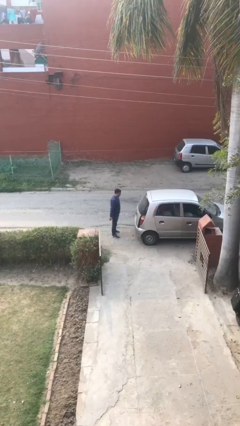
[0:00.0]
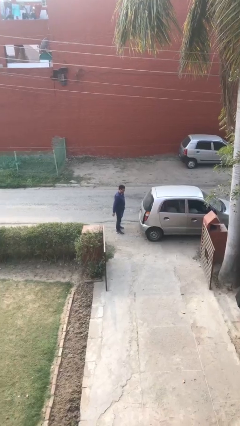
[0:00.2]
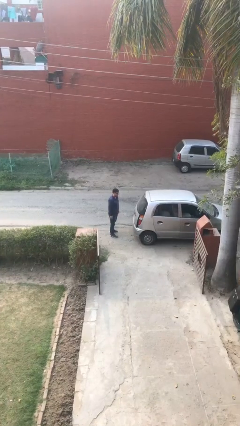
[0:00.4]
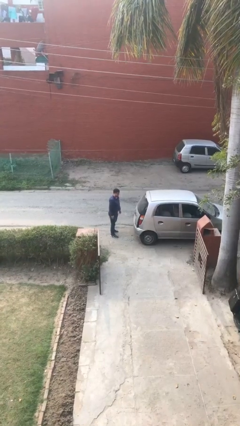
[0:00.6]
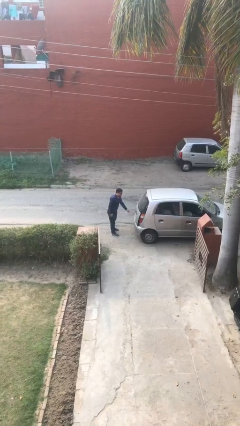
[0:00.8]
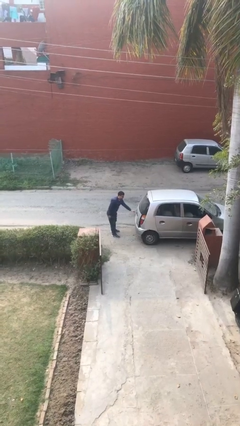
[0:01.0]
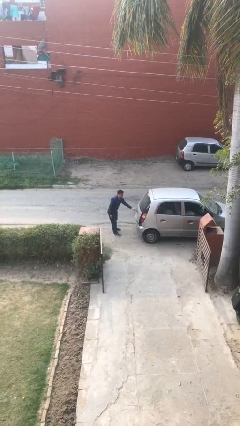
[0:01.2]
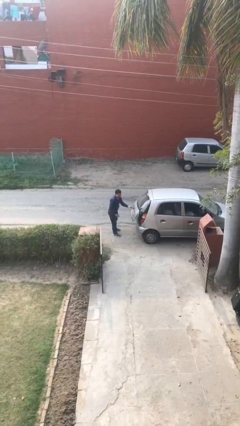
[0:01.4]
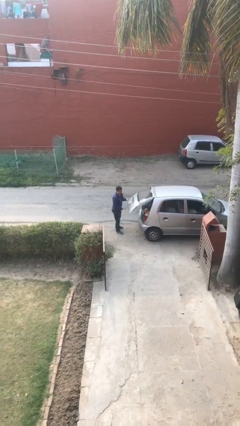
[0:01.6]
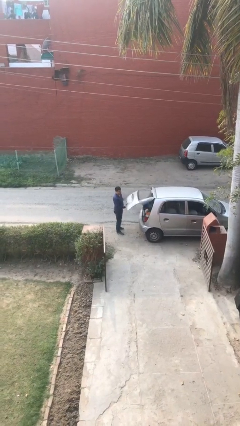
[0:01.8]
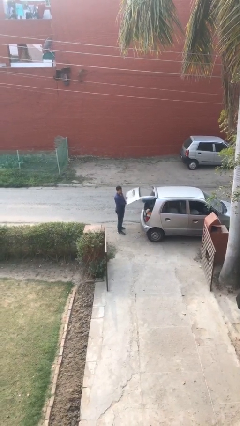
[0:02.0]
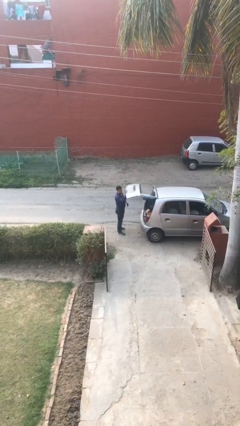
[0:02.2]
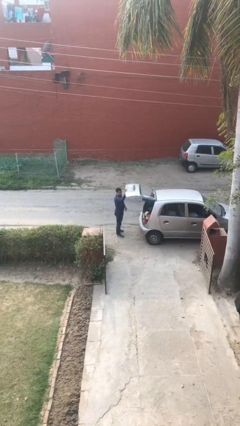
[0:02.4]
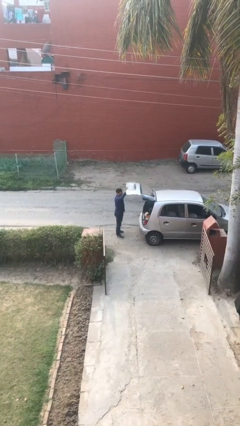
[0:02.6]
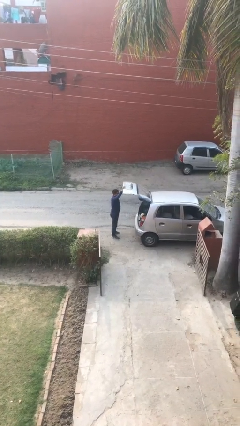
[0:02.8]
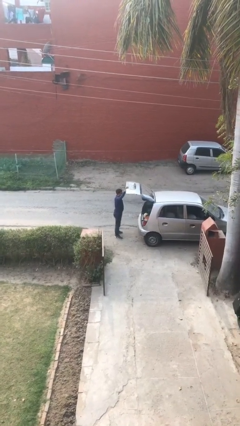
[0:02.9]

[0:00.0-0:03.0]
person opens car trunk

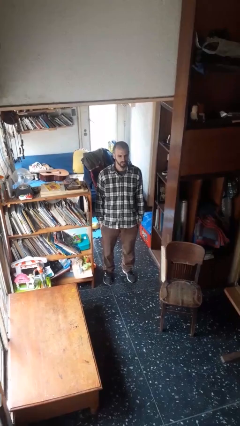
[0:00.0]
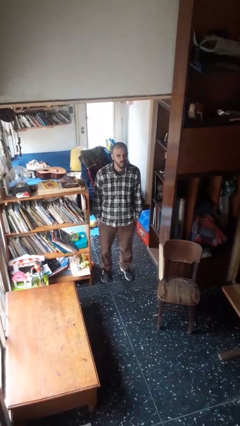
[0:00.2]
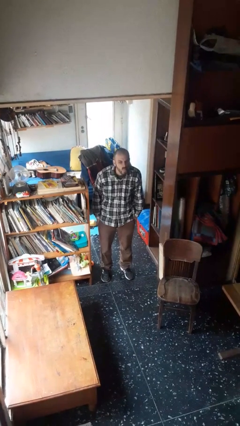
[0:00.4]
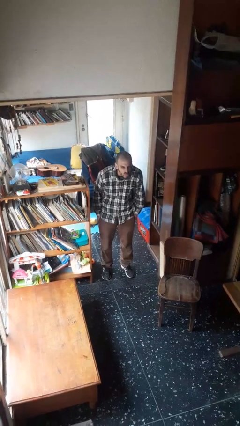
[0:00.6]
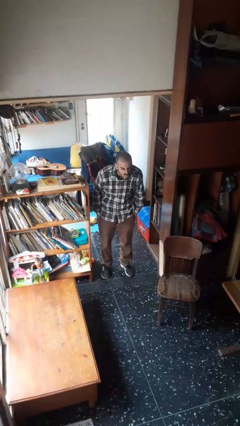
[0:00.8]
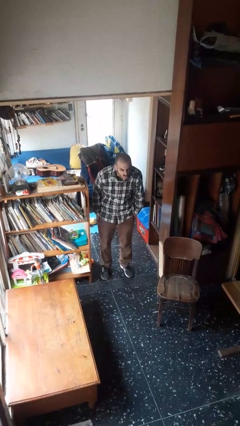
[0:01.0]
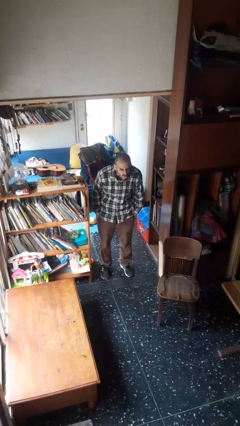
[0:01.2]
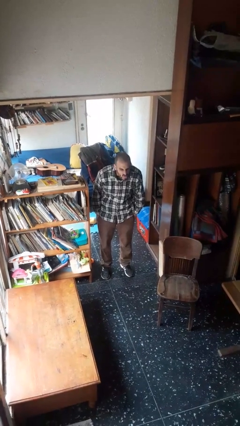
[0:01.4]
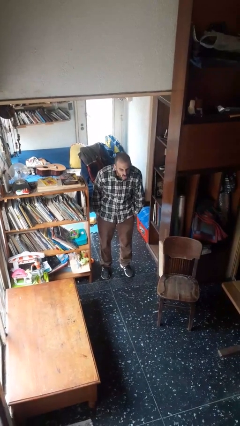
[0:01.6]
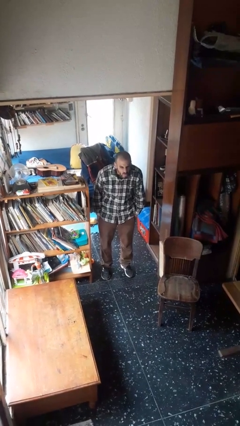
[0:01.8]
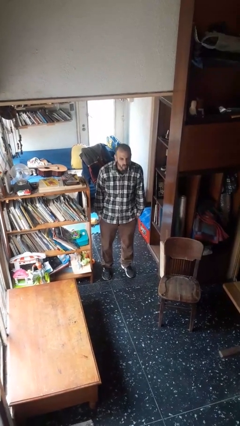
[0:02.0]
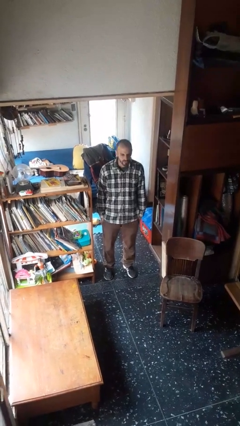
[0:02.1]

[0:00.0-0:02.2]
person sticks out tongue

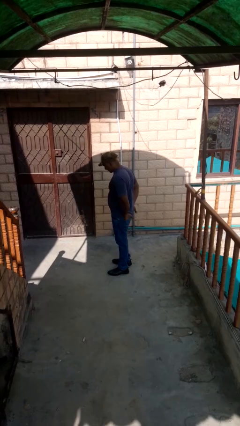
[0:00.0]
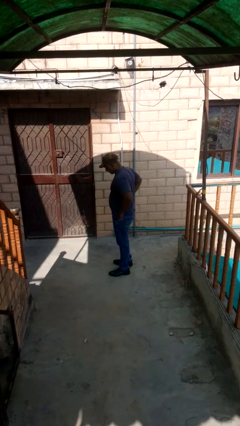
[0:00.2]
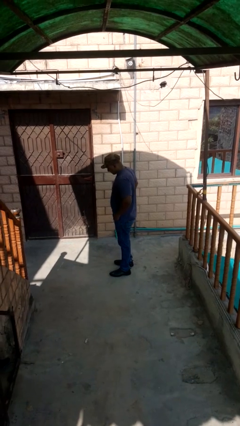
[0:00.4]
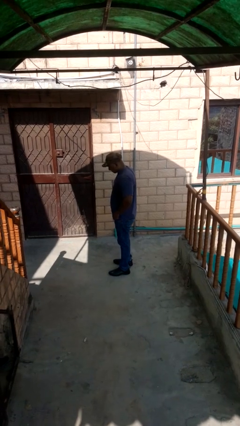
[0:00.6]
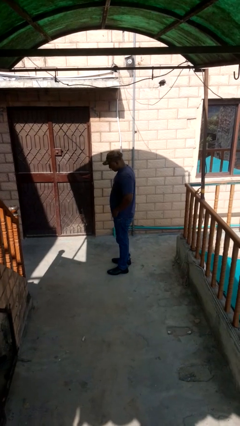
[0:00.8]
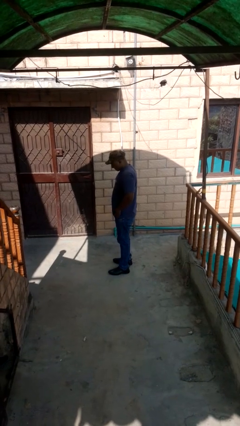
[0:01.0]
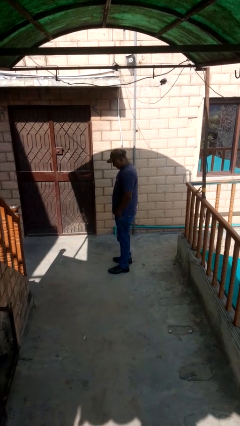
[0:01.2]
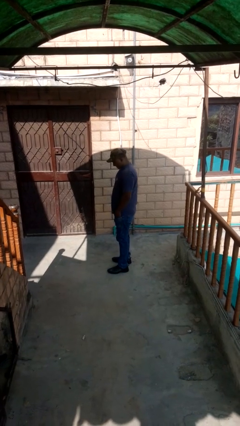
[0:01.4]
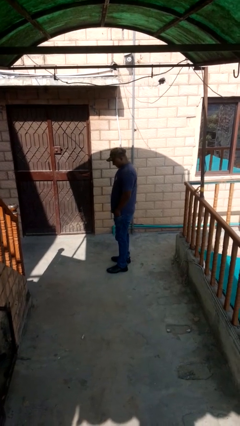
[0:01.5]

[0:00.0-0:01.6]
person puts hands in back pockets

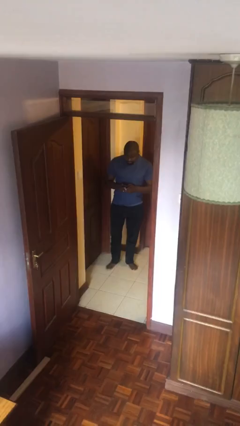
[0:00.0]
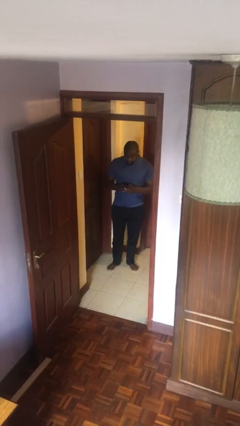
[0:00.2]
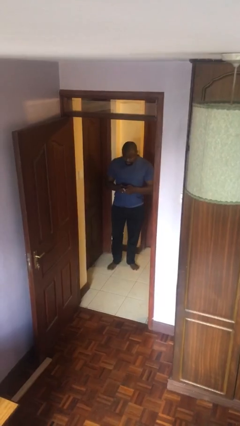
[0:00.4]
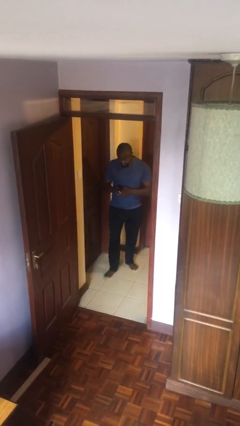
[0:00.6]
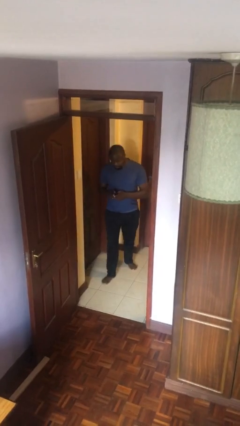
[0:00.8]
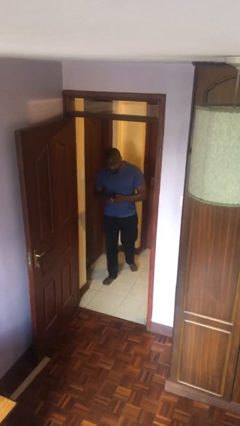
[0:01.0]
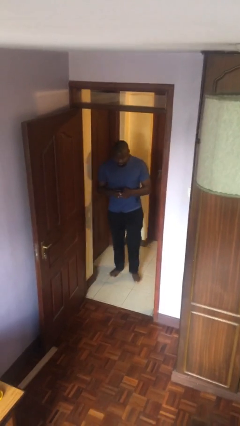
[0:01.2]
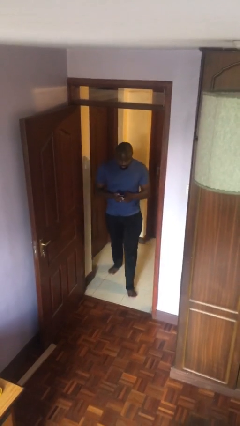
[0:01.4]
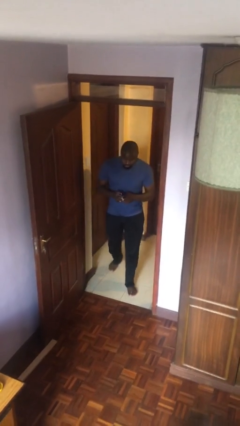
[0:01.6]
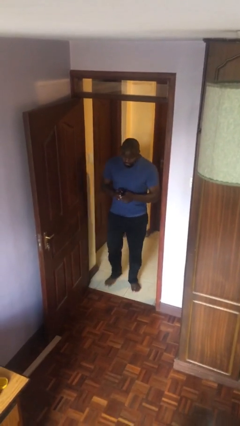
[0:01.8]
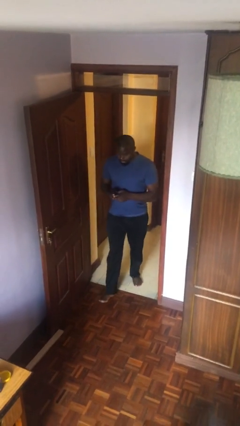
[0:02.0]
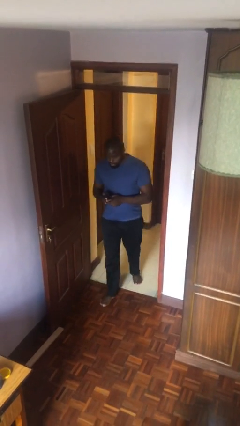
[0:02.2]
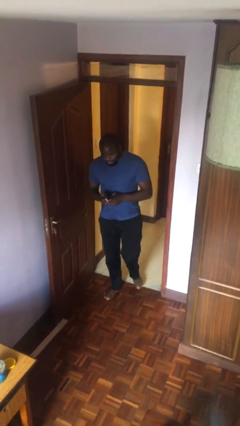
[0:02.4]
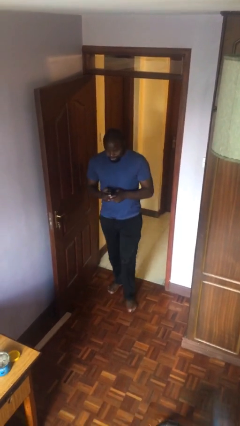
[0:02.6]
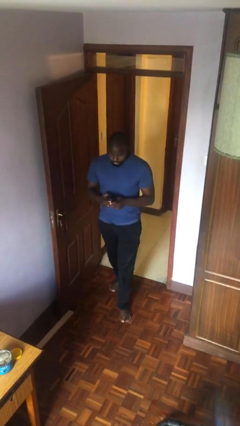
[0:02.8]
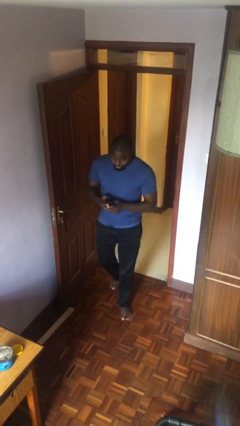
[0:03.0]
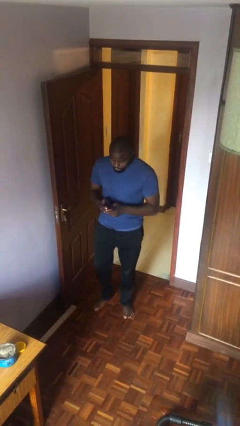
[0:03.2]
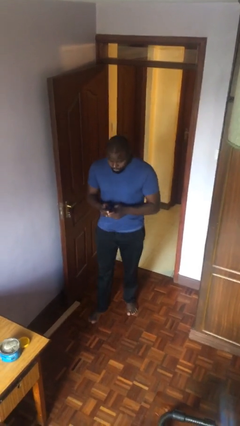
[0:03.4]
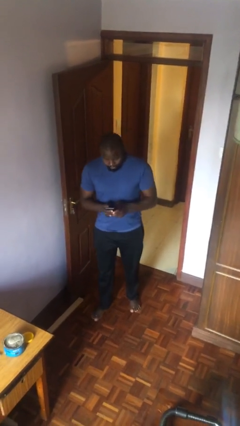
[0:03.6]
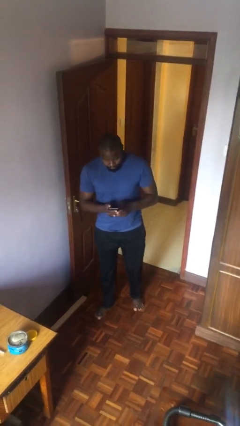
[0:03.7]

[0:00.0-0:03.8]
person enters scene through structure

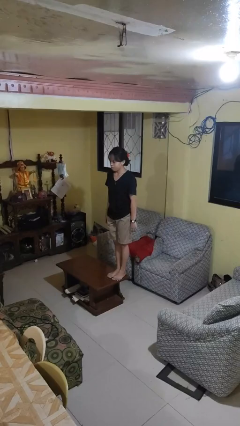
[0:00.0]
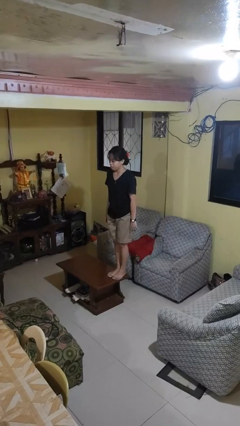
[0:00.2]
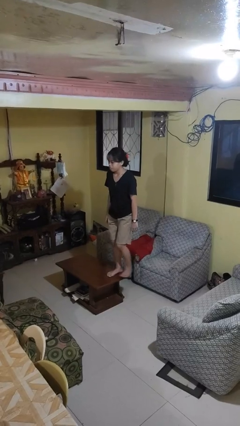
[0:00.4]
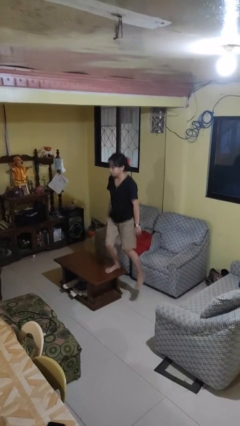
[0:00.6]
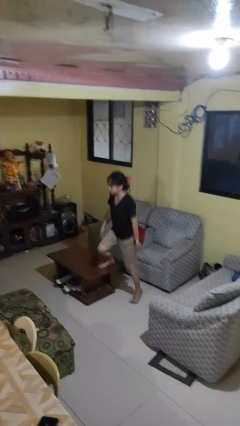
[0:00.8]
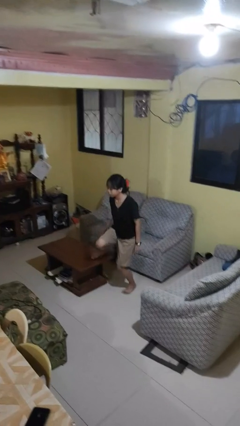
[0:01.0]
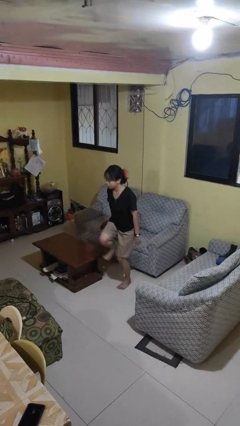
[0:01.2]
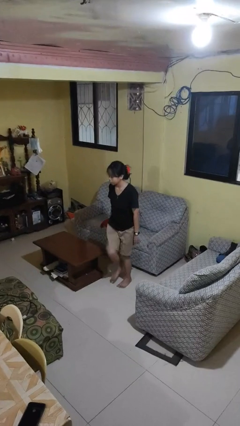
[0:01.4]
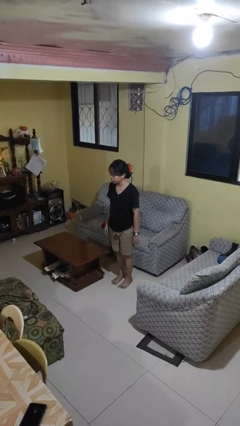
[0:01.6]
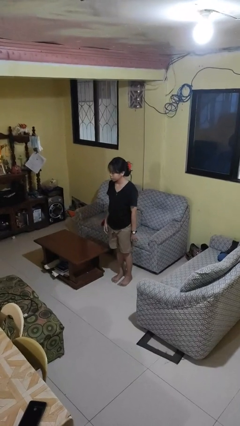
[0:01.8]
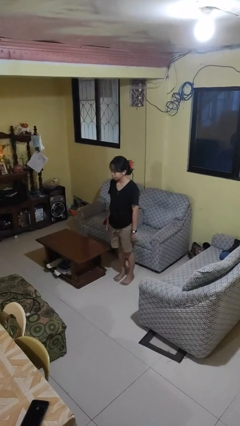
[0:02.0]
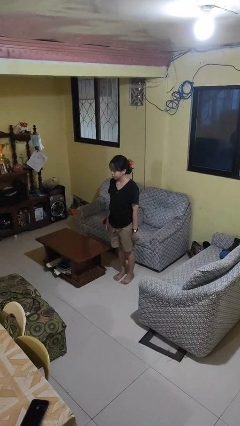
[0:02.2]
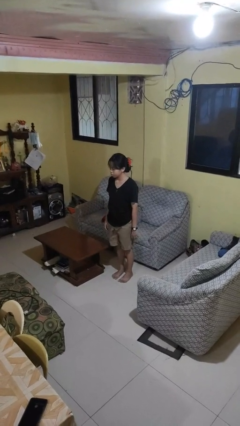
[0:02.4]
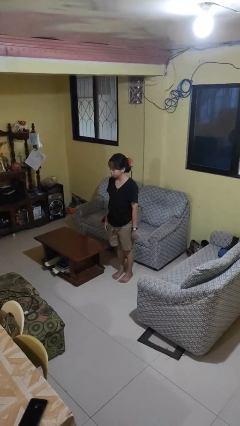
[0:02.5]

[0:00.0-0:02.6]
person climbs off table

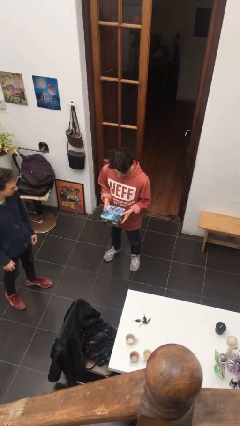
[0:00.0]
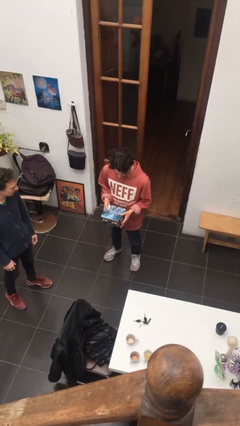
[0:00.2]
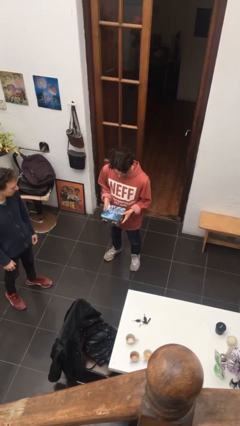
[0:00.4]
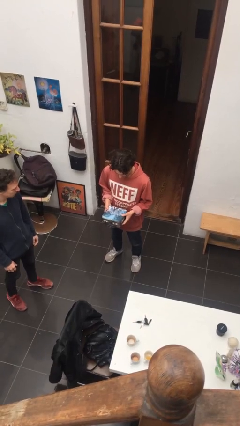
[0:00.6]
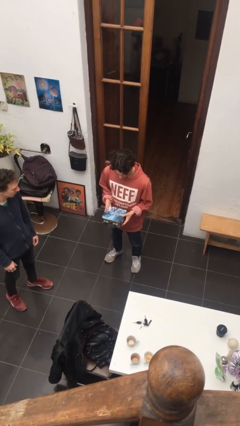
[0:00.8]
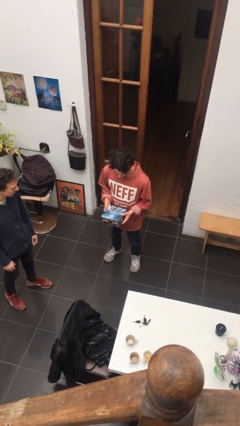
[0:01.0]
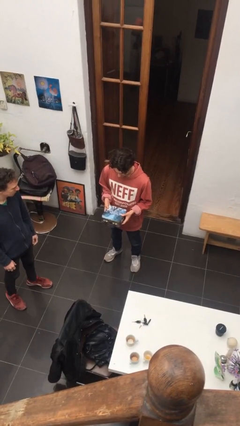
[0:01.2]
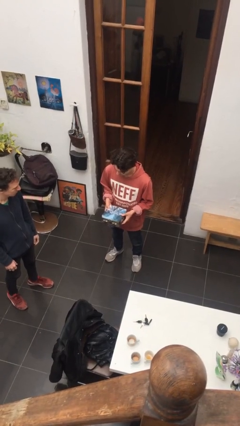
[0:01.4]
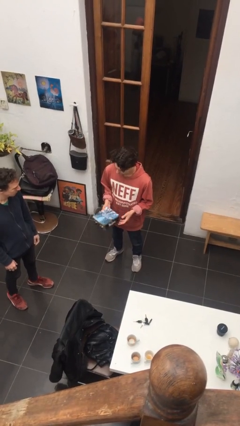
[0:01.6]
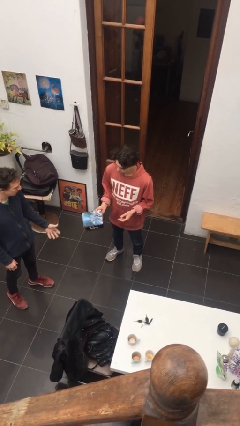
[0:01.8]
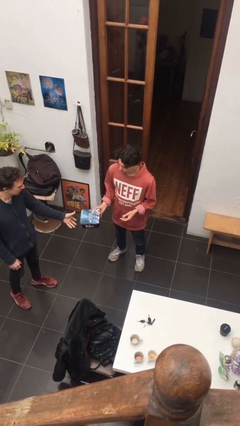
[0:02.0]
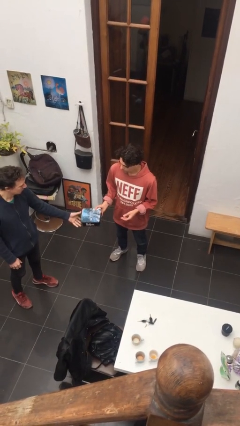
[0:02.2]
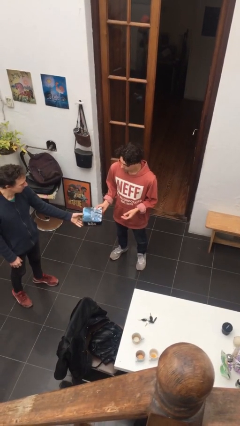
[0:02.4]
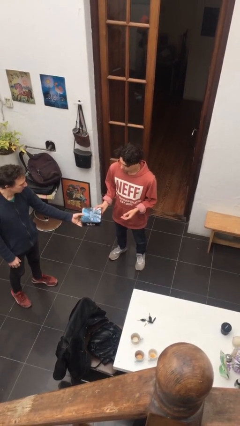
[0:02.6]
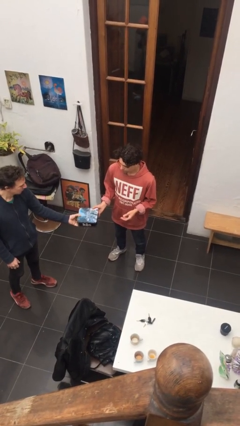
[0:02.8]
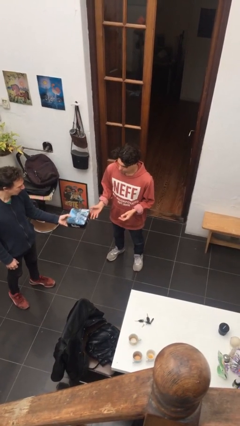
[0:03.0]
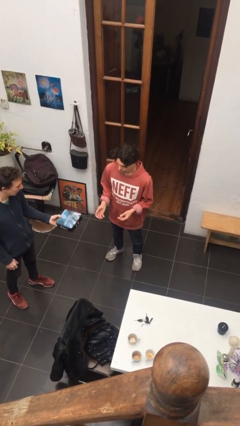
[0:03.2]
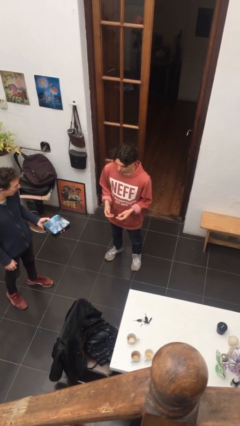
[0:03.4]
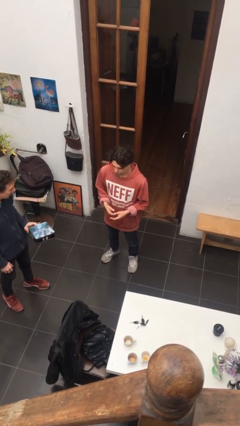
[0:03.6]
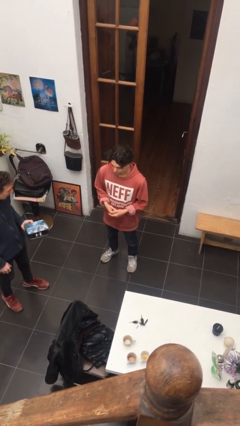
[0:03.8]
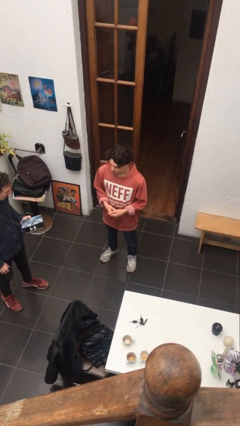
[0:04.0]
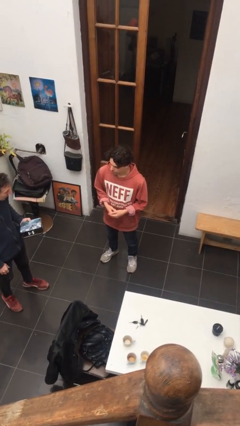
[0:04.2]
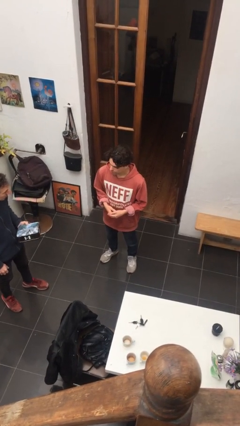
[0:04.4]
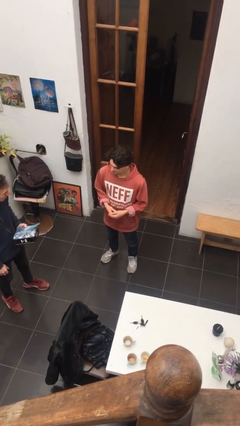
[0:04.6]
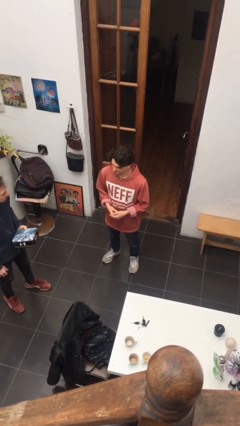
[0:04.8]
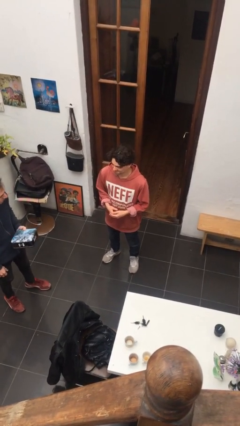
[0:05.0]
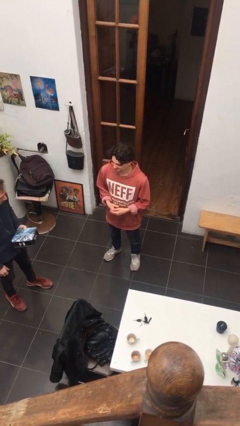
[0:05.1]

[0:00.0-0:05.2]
person transfers object to person
